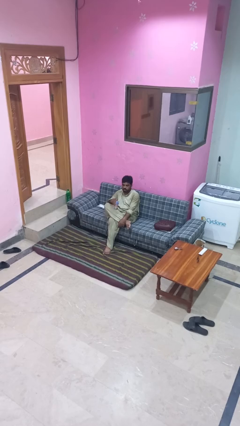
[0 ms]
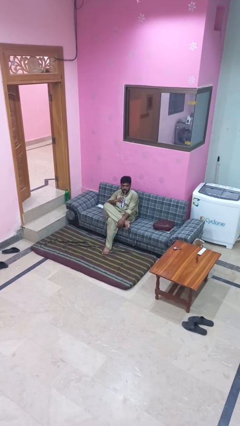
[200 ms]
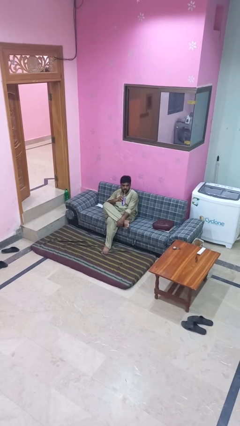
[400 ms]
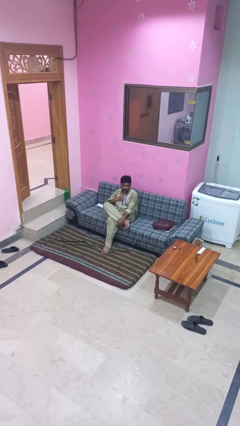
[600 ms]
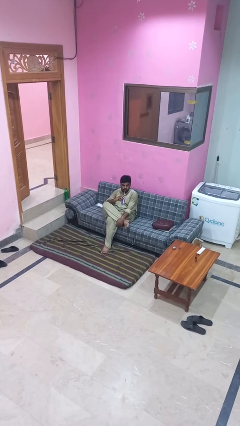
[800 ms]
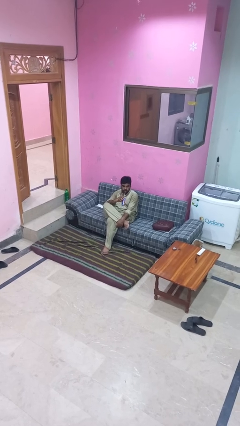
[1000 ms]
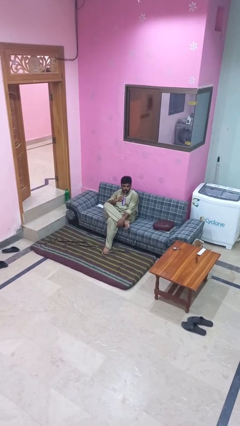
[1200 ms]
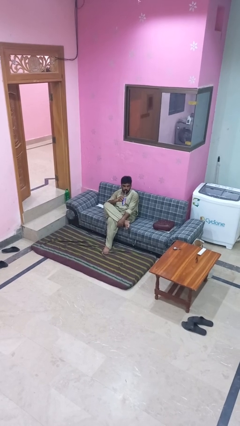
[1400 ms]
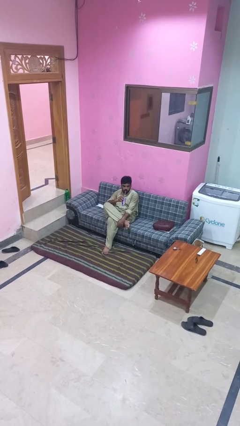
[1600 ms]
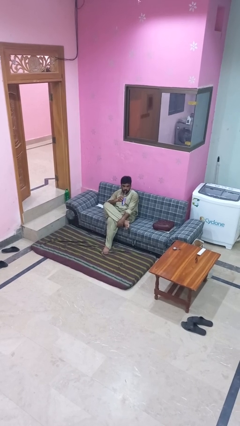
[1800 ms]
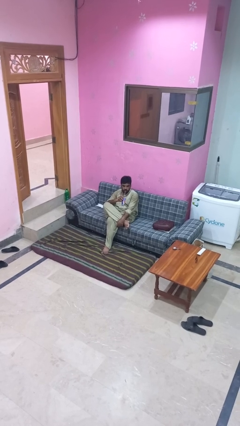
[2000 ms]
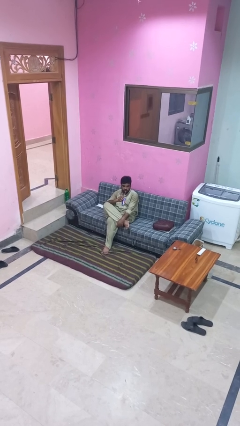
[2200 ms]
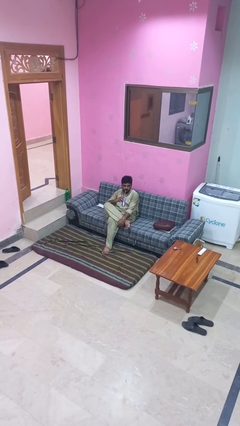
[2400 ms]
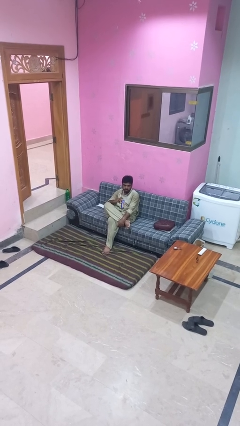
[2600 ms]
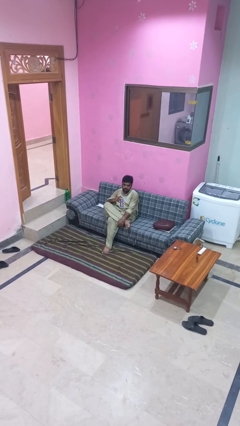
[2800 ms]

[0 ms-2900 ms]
person drinks from straw

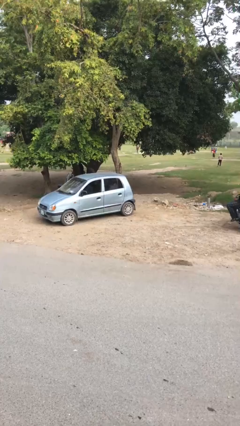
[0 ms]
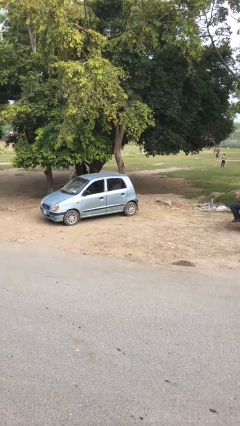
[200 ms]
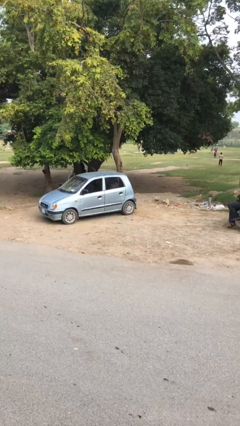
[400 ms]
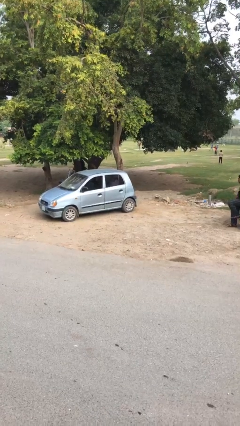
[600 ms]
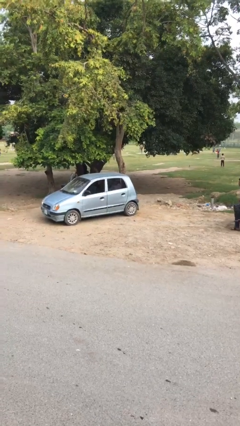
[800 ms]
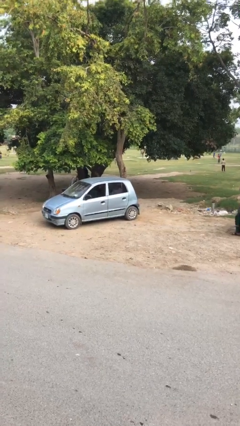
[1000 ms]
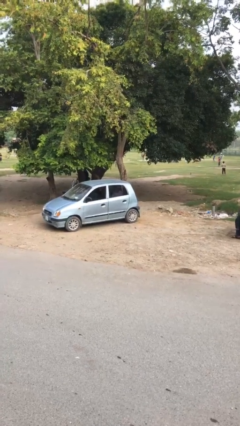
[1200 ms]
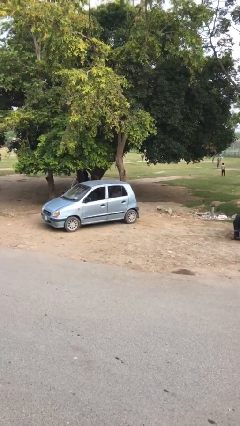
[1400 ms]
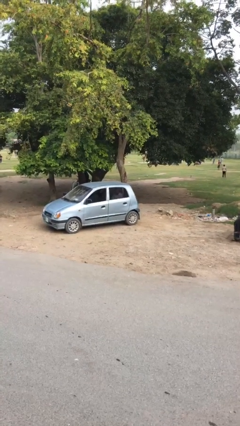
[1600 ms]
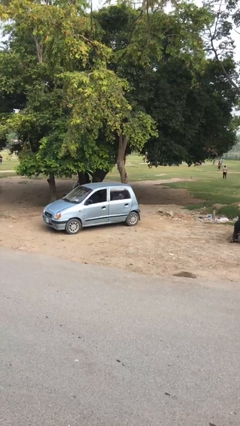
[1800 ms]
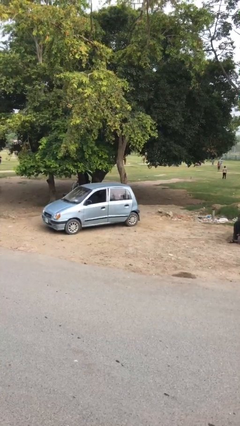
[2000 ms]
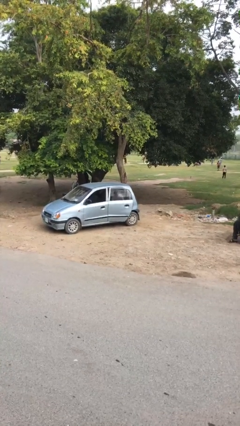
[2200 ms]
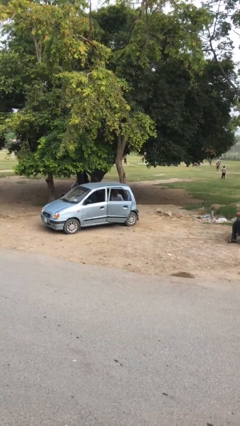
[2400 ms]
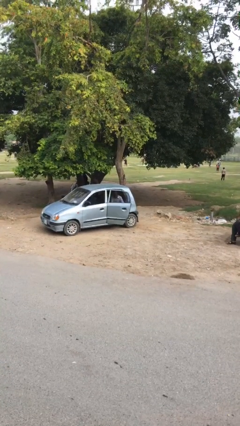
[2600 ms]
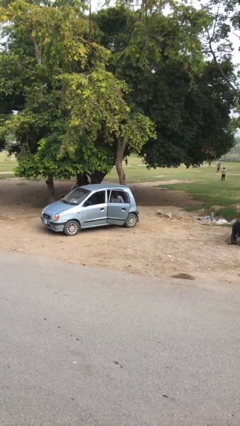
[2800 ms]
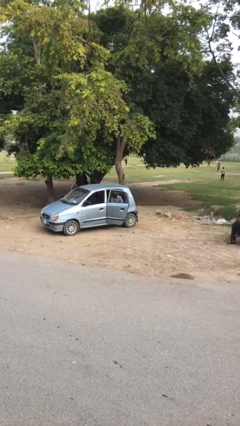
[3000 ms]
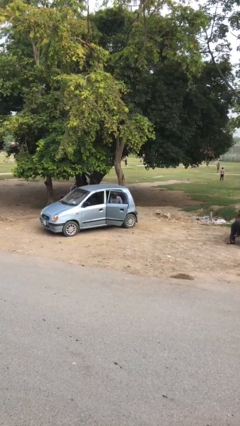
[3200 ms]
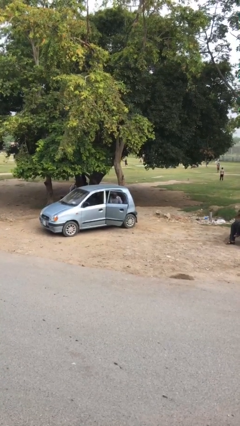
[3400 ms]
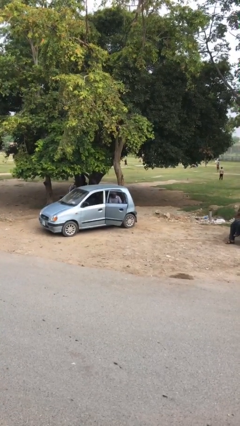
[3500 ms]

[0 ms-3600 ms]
person opens car door

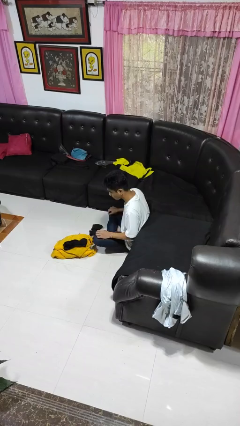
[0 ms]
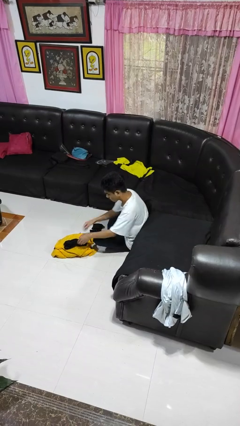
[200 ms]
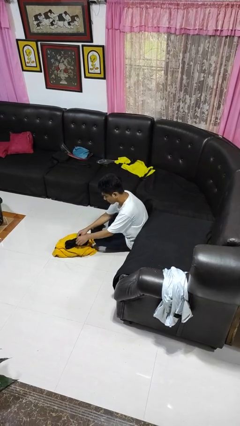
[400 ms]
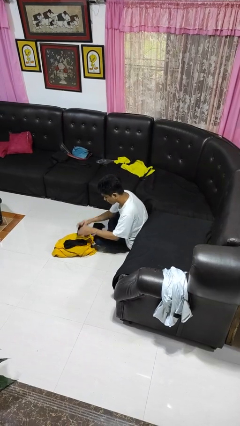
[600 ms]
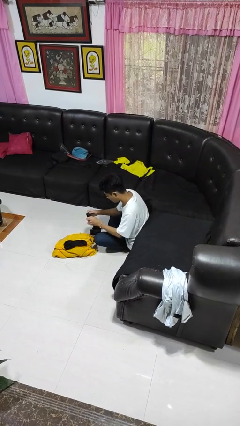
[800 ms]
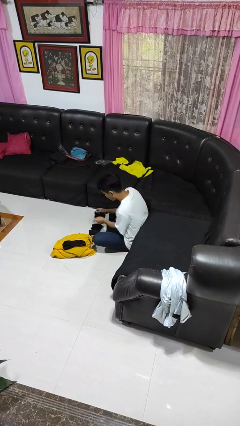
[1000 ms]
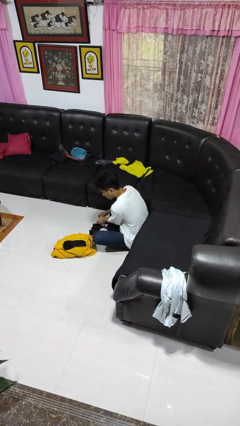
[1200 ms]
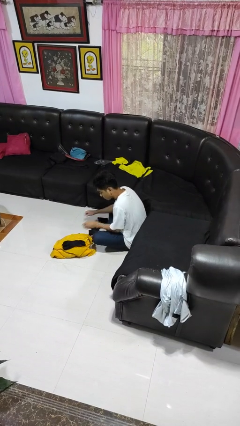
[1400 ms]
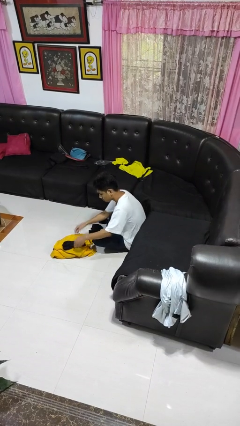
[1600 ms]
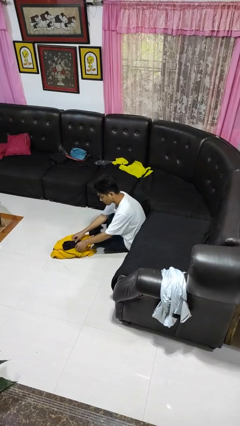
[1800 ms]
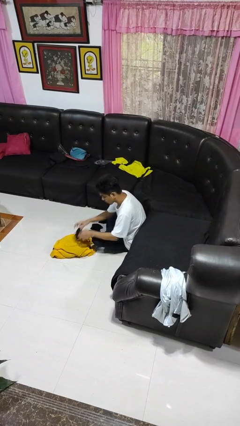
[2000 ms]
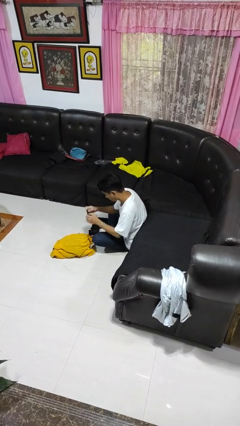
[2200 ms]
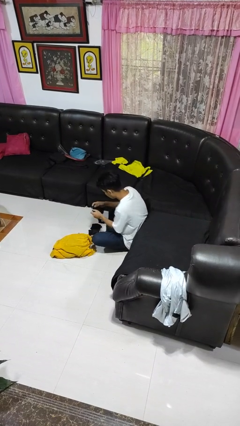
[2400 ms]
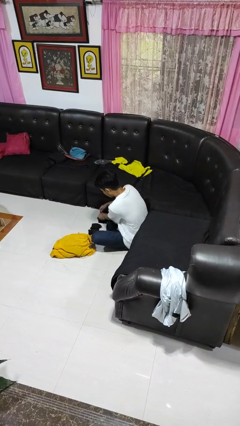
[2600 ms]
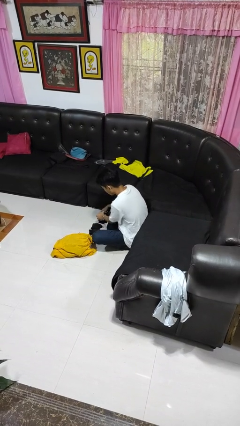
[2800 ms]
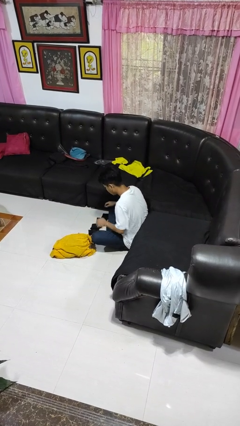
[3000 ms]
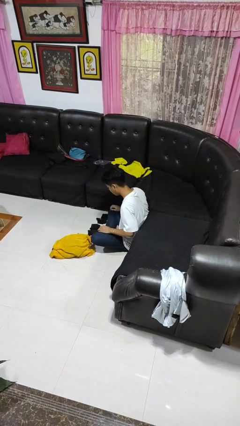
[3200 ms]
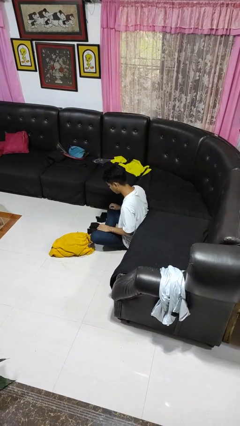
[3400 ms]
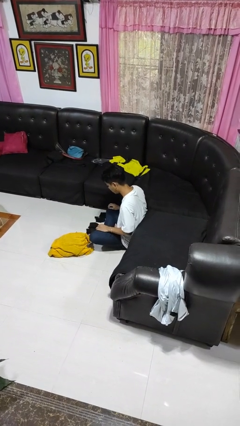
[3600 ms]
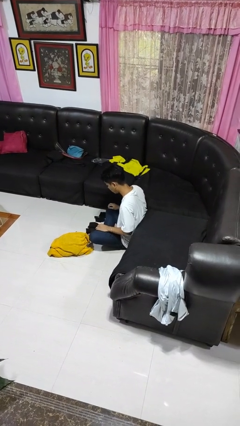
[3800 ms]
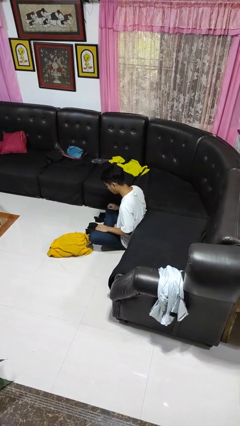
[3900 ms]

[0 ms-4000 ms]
person folds socks

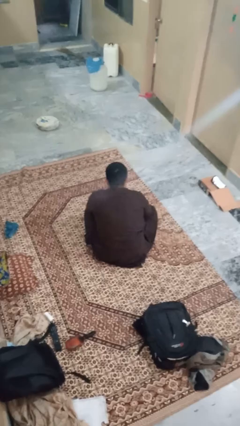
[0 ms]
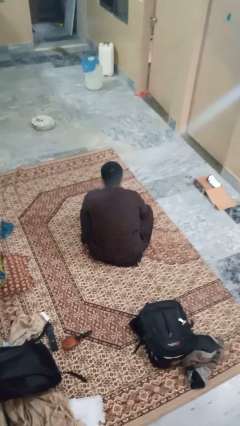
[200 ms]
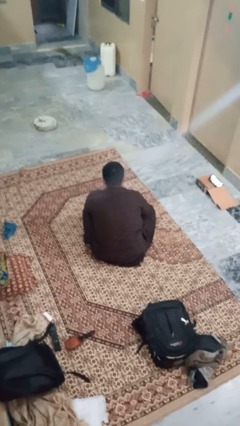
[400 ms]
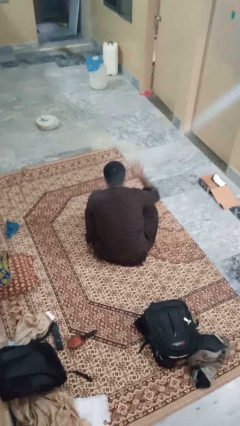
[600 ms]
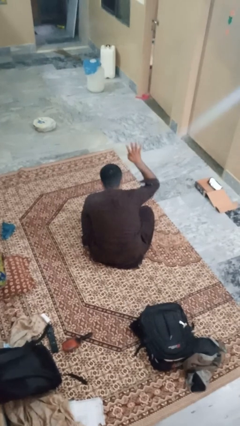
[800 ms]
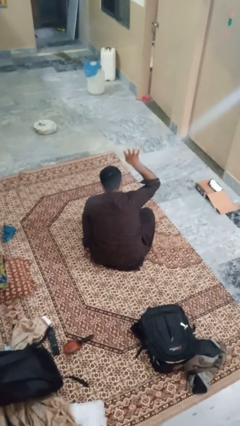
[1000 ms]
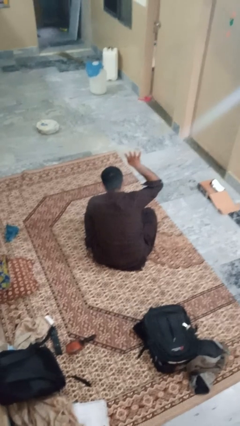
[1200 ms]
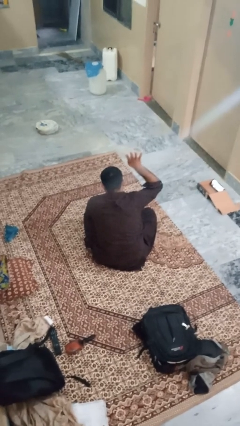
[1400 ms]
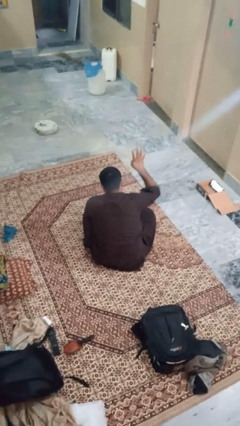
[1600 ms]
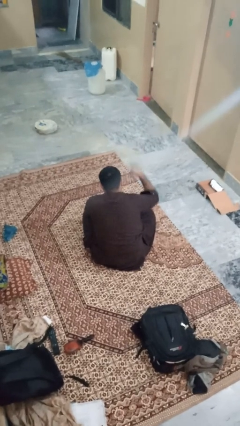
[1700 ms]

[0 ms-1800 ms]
person gestures number four

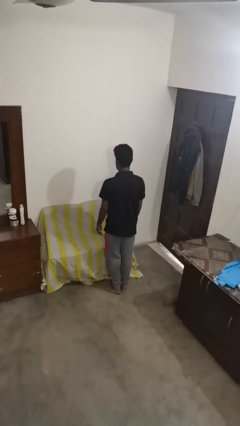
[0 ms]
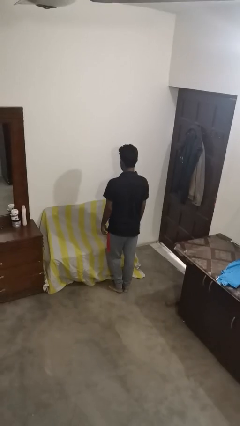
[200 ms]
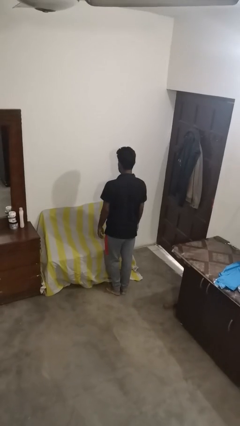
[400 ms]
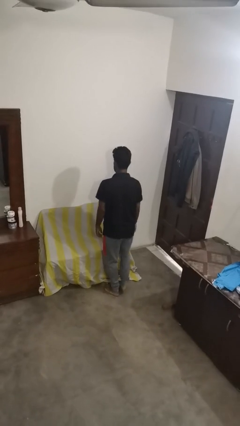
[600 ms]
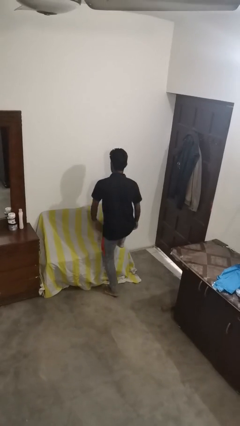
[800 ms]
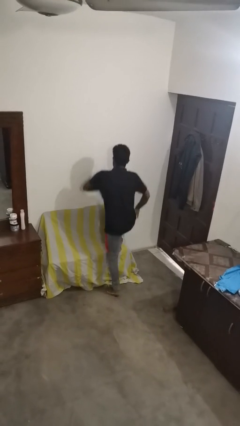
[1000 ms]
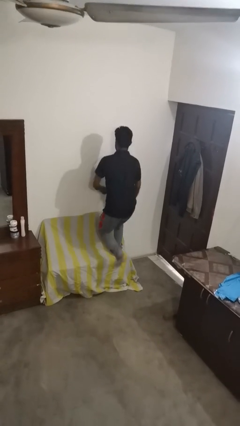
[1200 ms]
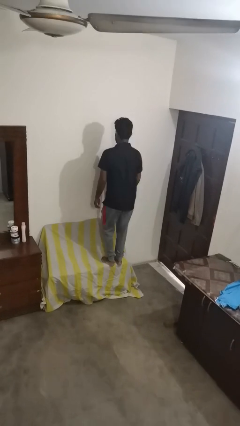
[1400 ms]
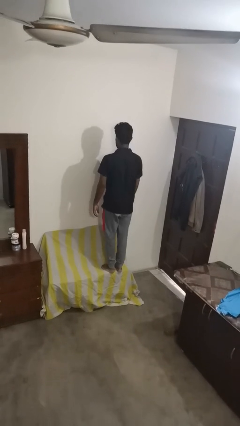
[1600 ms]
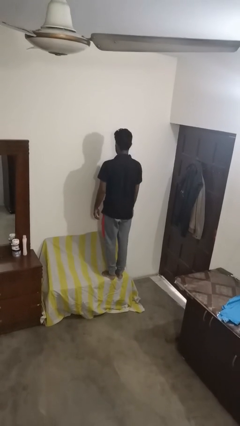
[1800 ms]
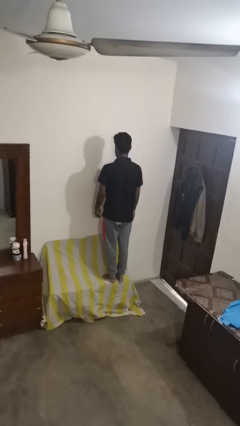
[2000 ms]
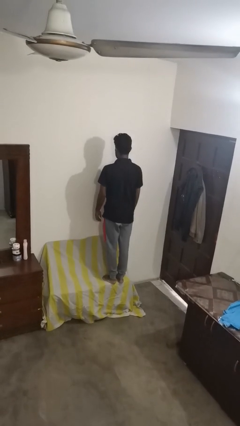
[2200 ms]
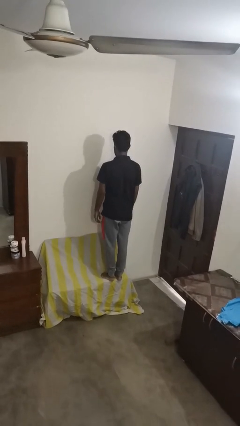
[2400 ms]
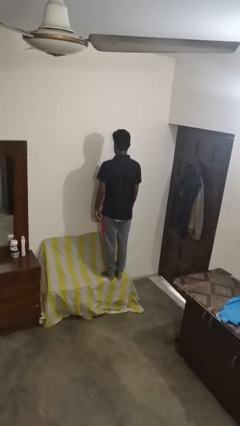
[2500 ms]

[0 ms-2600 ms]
person jumps on couch

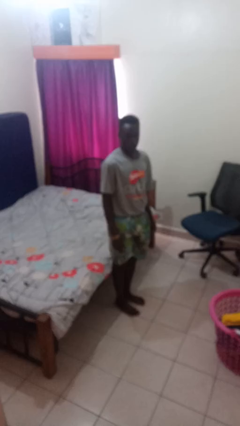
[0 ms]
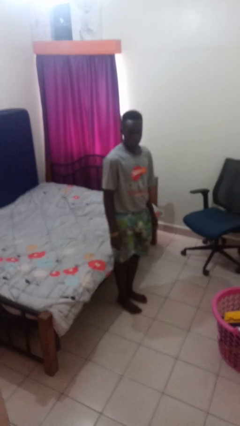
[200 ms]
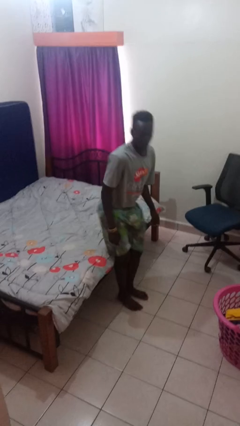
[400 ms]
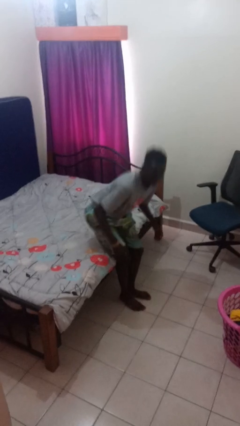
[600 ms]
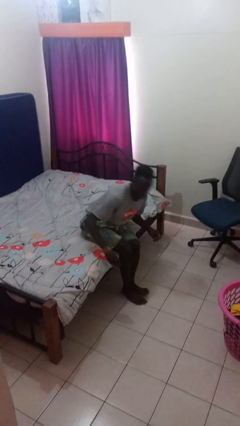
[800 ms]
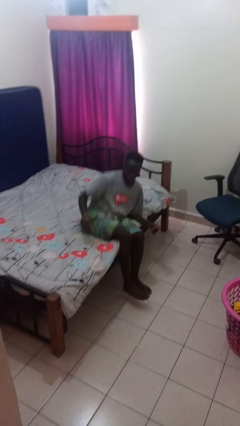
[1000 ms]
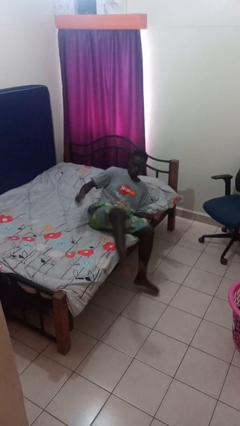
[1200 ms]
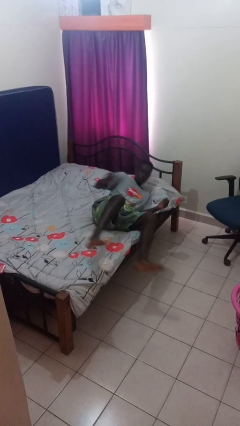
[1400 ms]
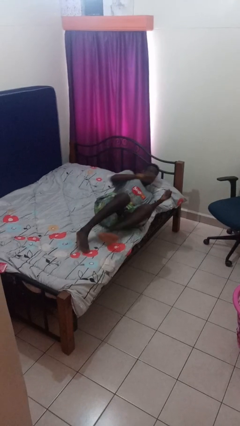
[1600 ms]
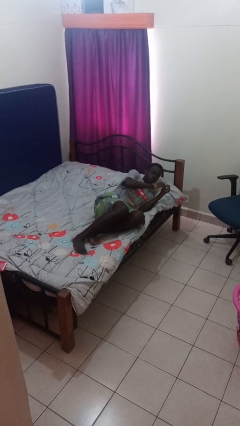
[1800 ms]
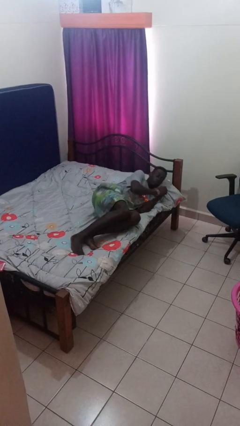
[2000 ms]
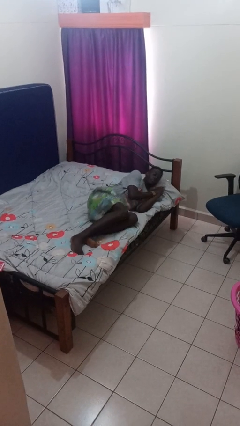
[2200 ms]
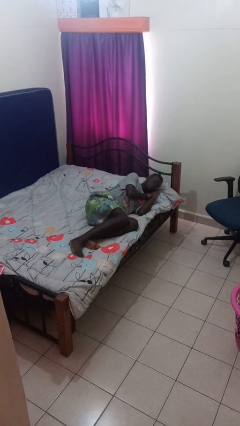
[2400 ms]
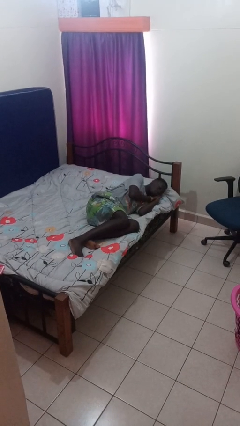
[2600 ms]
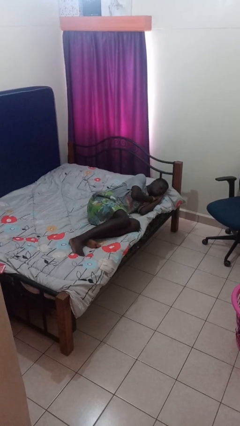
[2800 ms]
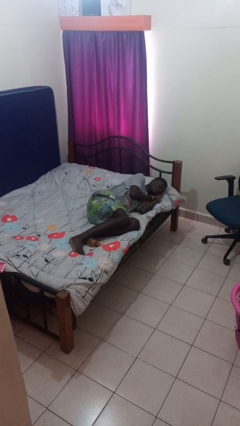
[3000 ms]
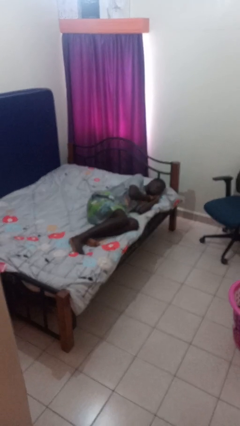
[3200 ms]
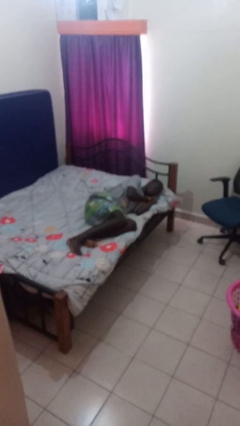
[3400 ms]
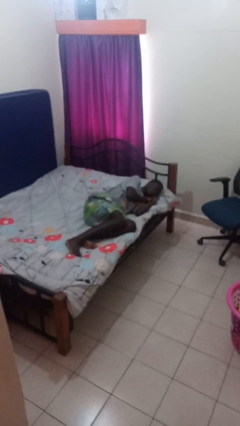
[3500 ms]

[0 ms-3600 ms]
person lies down on bed
